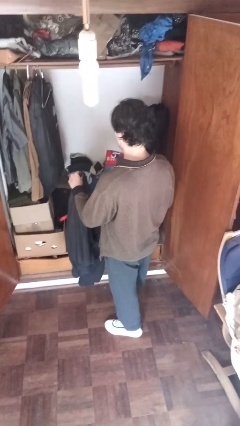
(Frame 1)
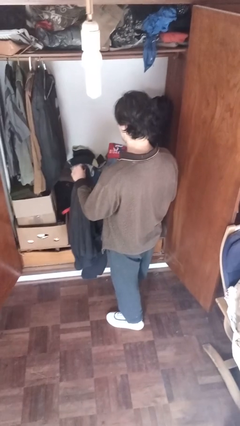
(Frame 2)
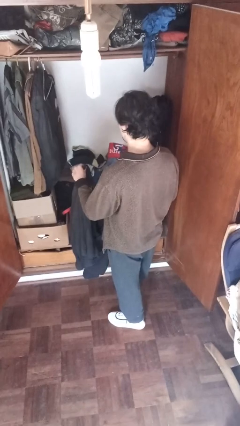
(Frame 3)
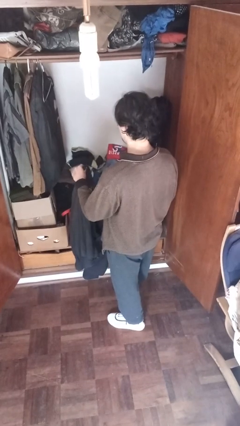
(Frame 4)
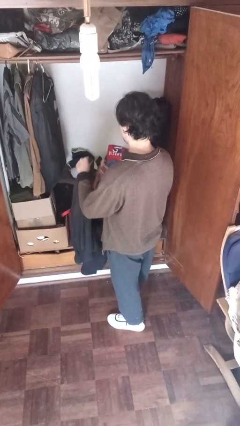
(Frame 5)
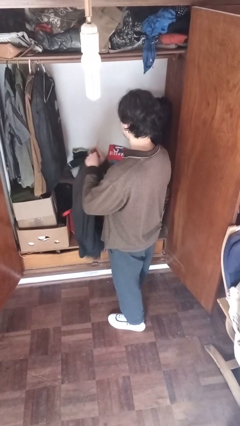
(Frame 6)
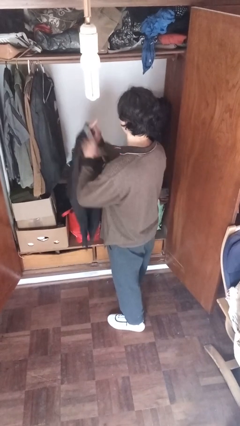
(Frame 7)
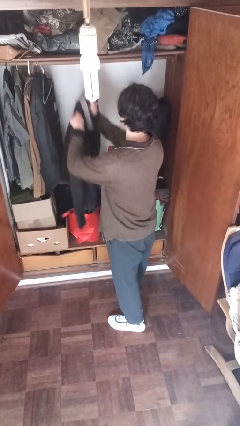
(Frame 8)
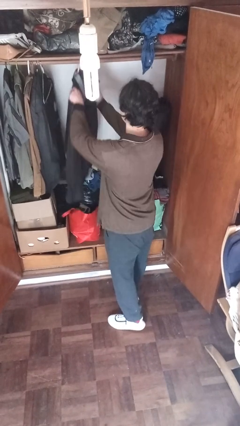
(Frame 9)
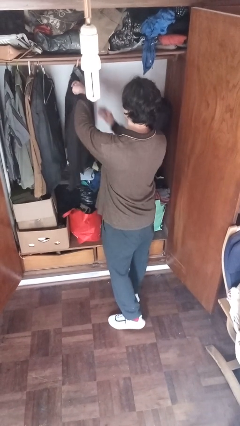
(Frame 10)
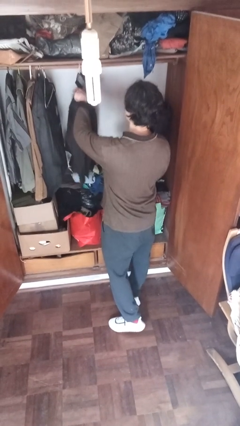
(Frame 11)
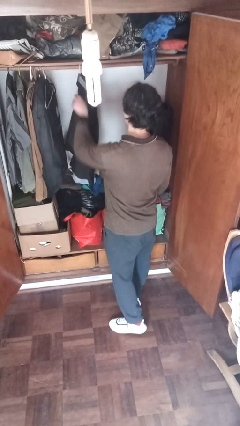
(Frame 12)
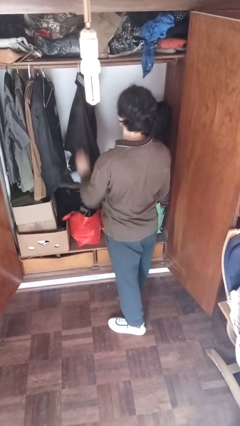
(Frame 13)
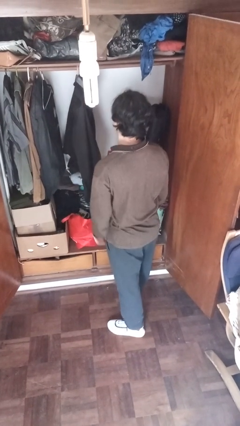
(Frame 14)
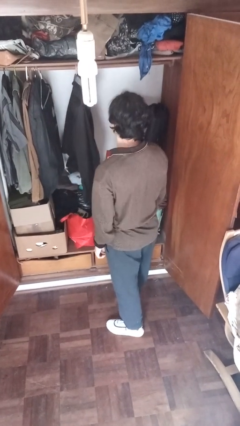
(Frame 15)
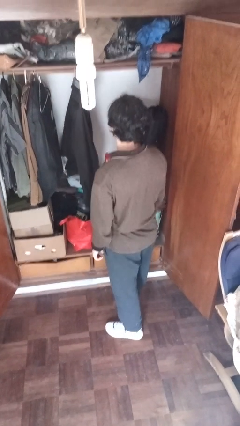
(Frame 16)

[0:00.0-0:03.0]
person puts clothes into closet

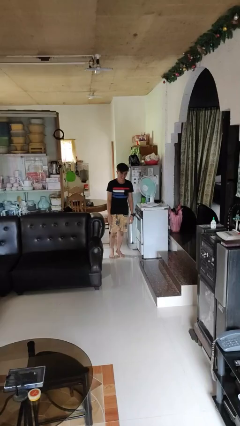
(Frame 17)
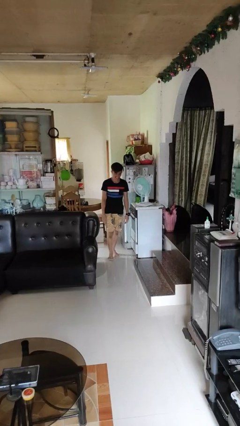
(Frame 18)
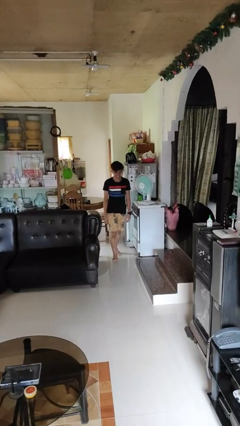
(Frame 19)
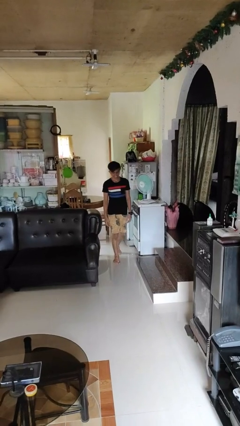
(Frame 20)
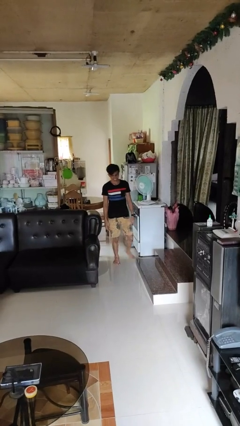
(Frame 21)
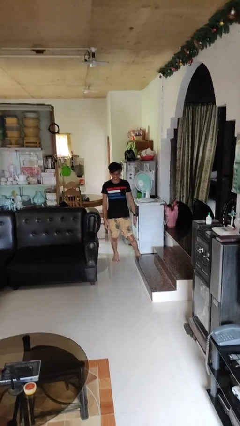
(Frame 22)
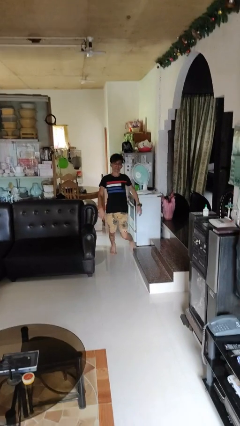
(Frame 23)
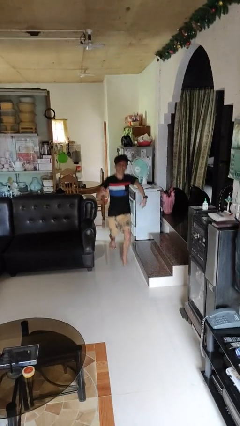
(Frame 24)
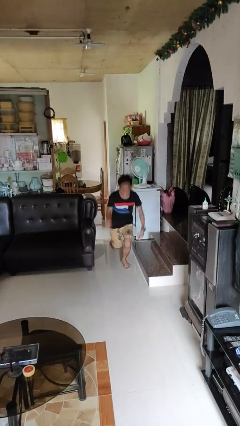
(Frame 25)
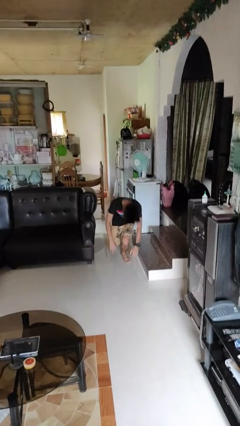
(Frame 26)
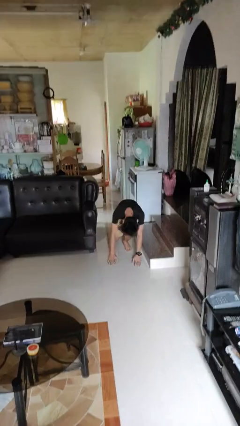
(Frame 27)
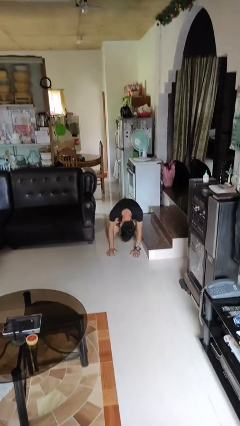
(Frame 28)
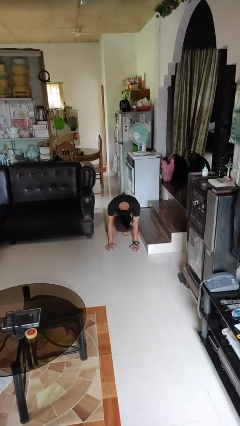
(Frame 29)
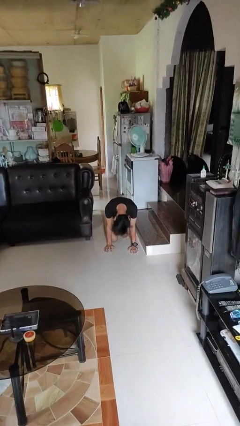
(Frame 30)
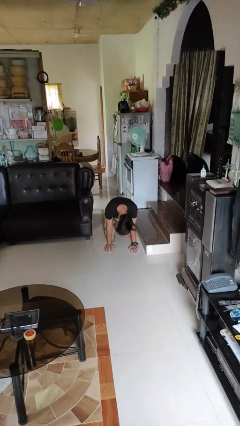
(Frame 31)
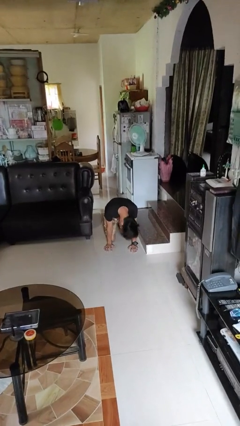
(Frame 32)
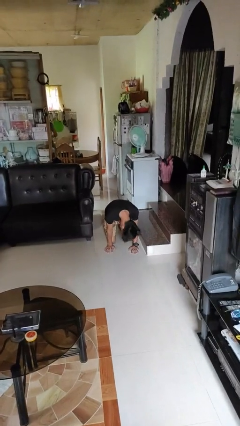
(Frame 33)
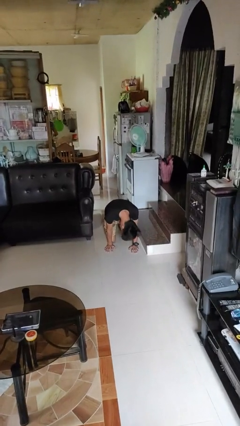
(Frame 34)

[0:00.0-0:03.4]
person trips on object on floor

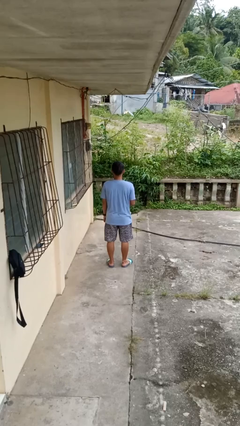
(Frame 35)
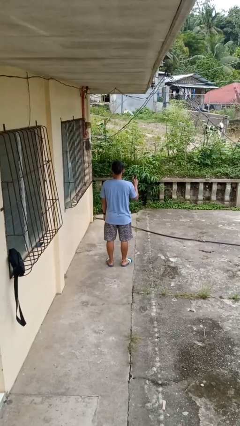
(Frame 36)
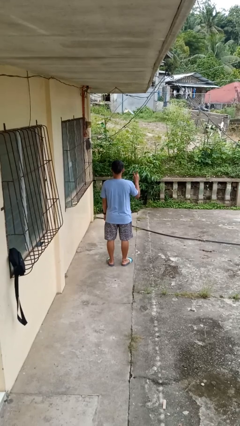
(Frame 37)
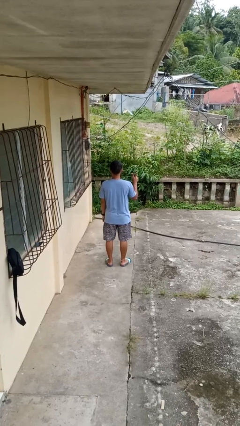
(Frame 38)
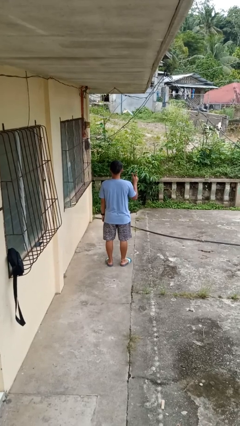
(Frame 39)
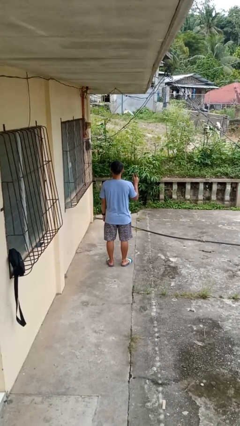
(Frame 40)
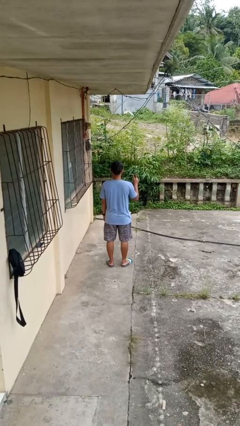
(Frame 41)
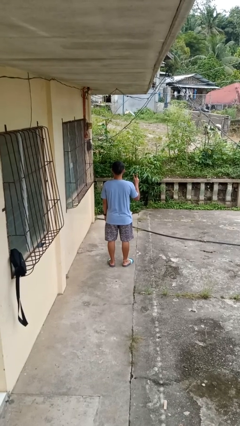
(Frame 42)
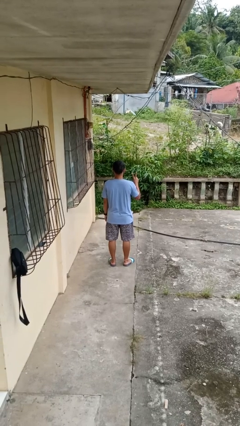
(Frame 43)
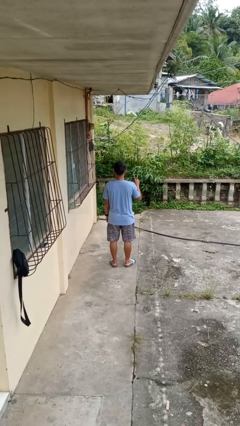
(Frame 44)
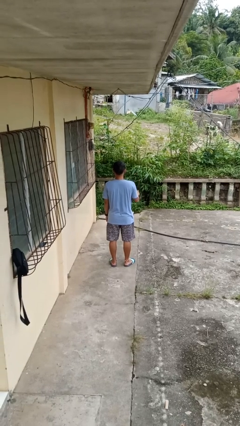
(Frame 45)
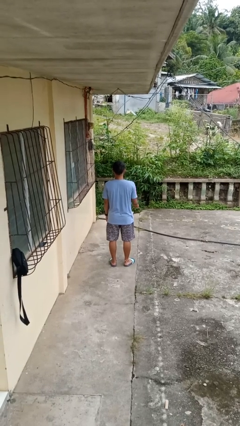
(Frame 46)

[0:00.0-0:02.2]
person gestures peace

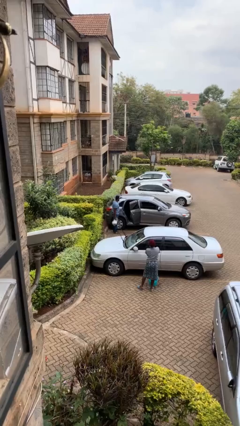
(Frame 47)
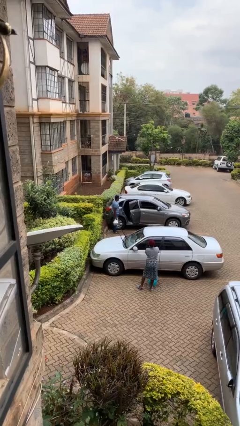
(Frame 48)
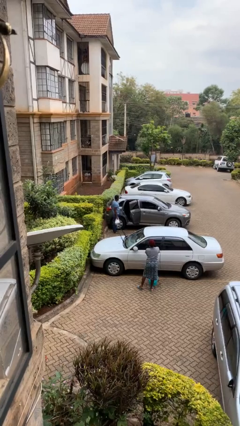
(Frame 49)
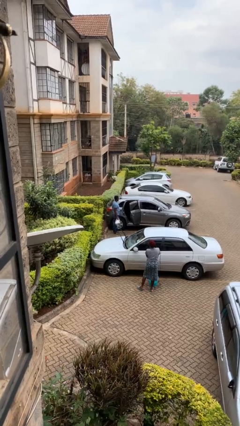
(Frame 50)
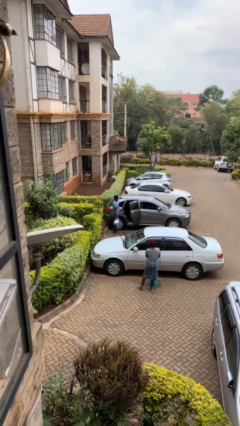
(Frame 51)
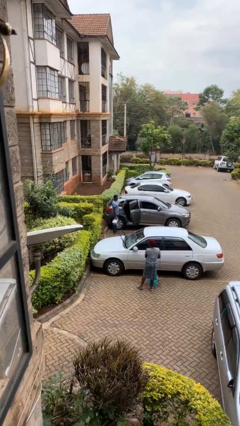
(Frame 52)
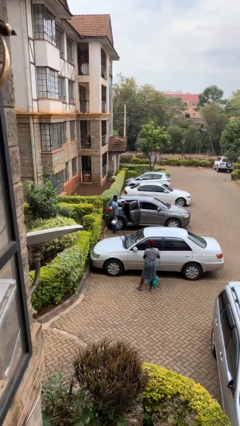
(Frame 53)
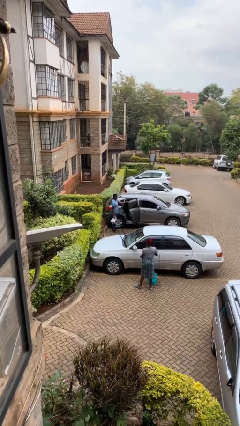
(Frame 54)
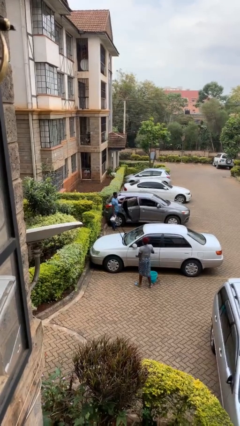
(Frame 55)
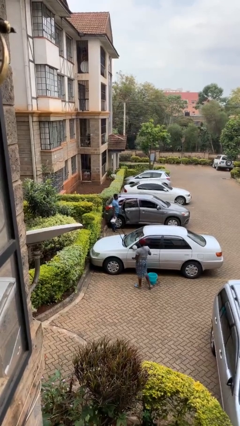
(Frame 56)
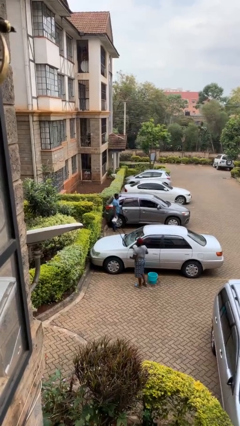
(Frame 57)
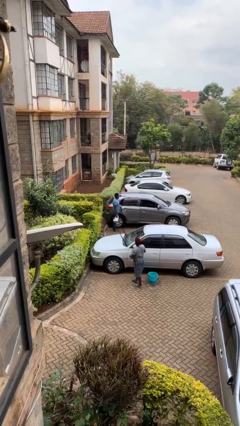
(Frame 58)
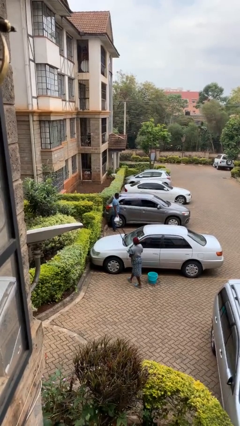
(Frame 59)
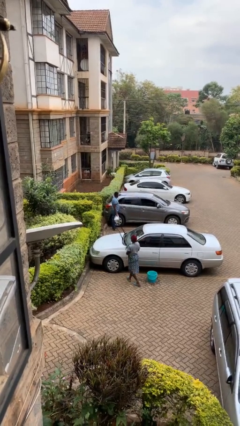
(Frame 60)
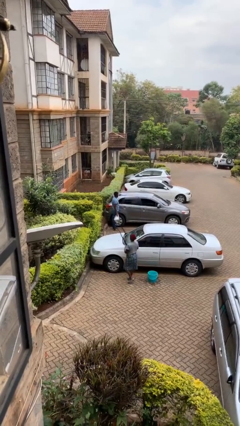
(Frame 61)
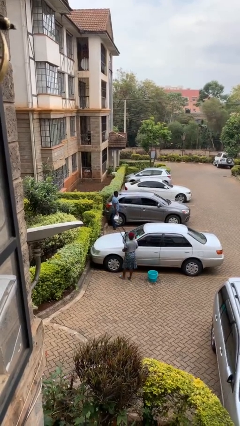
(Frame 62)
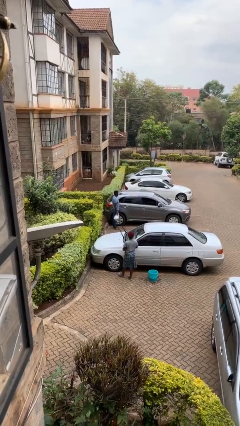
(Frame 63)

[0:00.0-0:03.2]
person closes car door

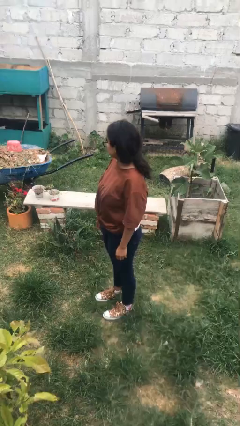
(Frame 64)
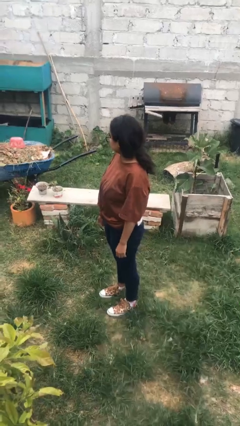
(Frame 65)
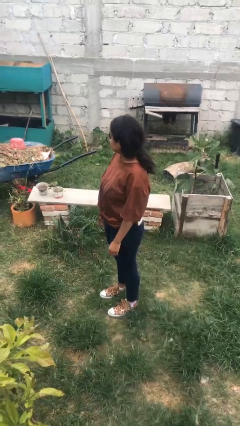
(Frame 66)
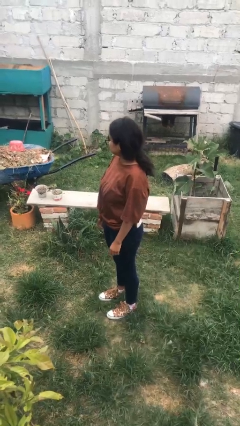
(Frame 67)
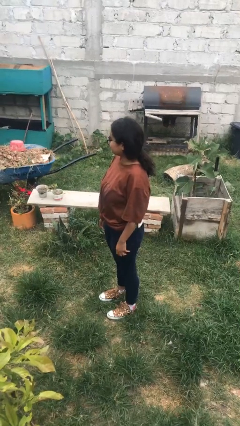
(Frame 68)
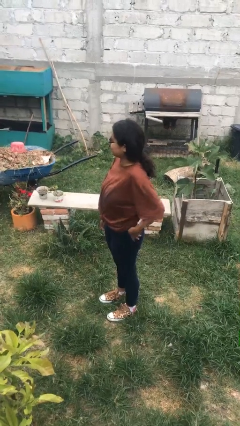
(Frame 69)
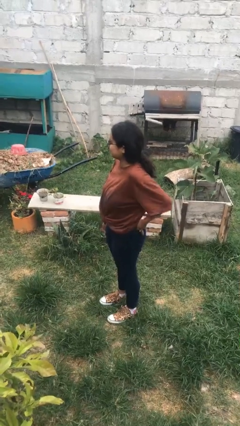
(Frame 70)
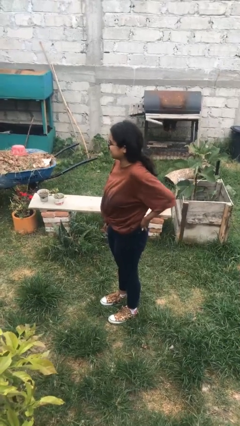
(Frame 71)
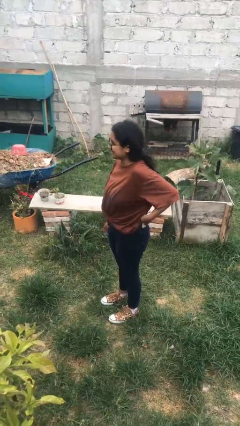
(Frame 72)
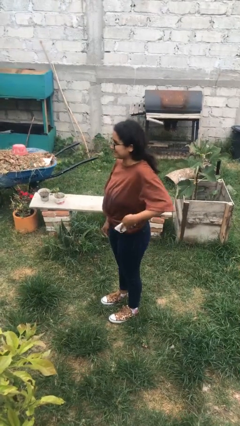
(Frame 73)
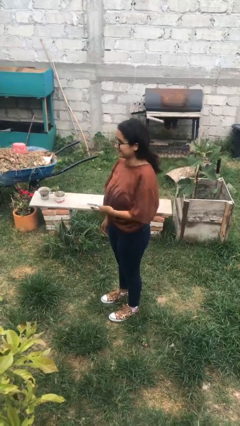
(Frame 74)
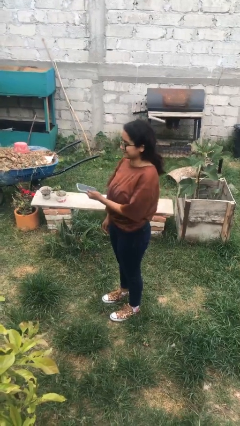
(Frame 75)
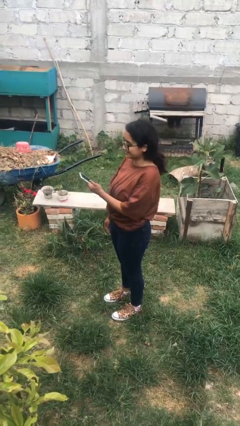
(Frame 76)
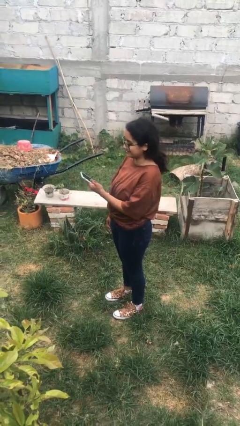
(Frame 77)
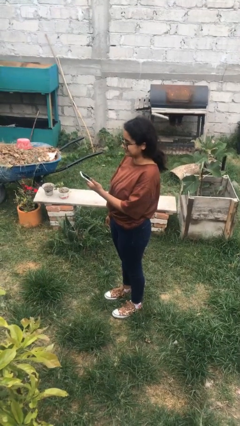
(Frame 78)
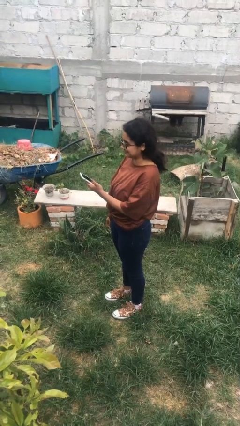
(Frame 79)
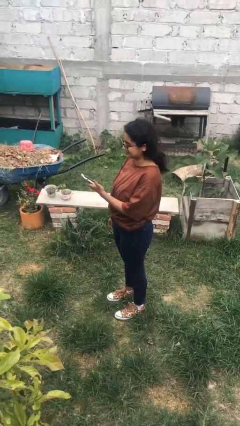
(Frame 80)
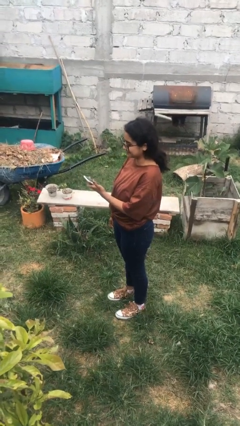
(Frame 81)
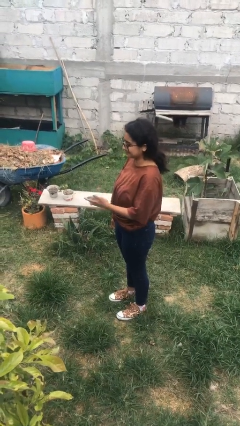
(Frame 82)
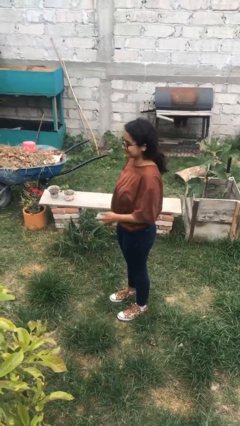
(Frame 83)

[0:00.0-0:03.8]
person takes phone from pocket

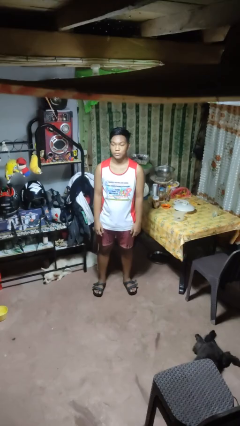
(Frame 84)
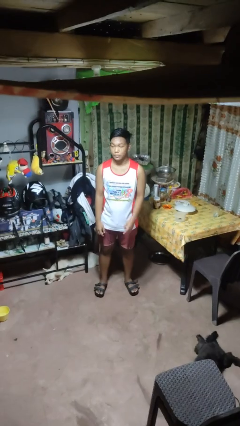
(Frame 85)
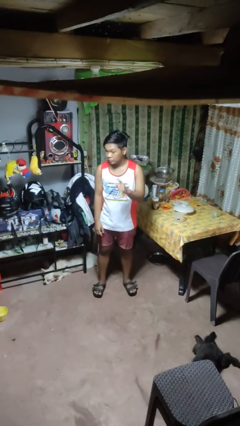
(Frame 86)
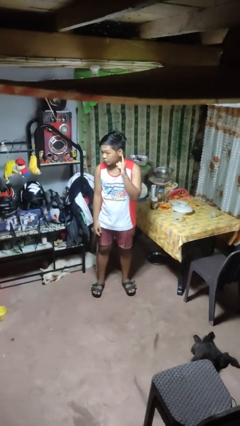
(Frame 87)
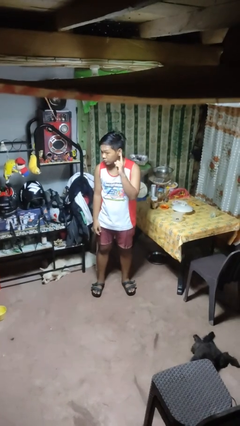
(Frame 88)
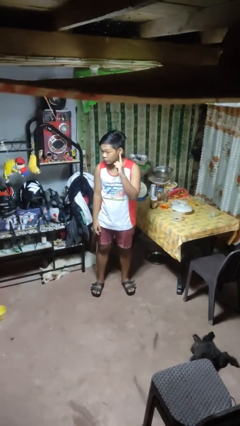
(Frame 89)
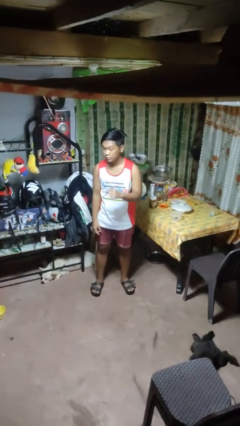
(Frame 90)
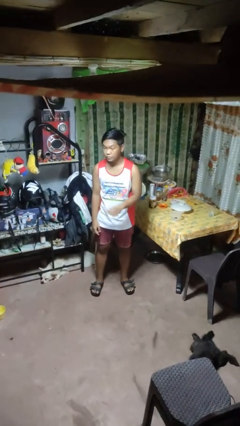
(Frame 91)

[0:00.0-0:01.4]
person gestures listen closely

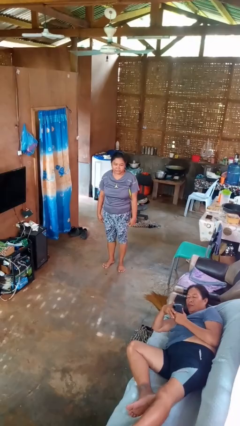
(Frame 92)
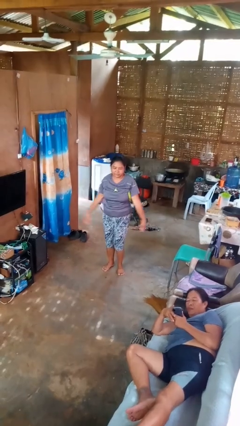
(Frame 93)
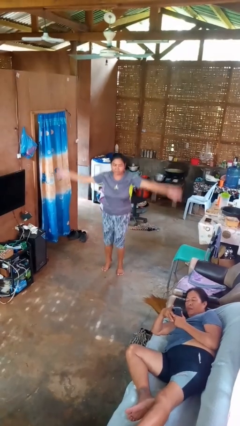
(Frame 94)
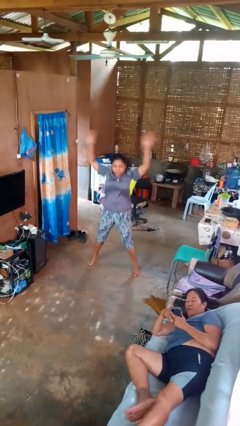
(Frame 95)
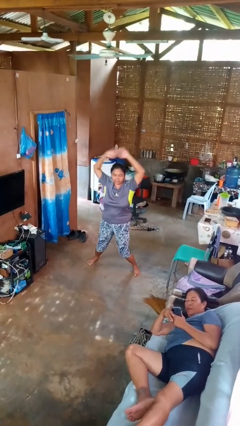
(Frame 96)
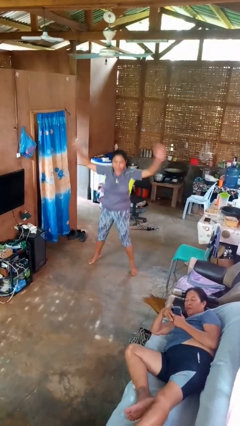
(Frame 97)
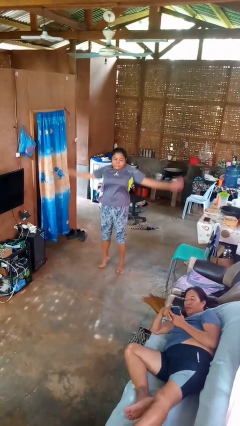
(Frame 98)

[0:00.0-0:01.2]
person exercises with jumping jacks
